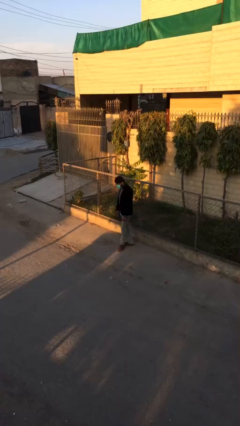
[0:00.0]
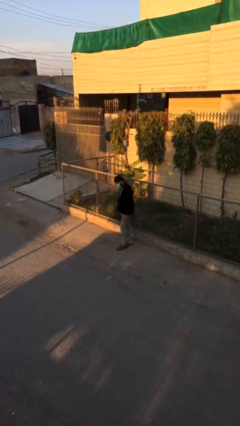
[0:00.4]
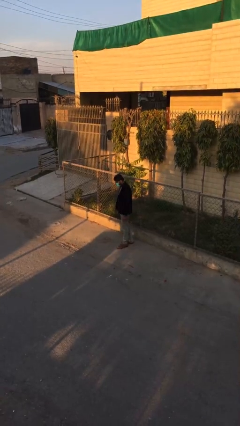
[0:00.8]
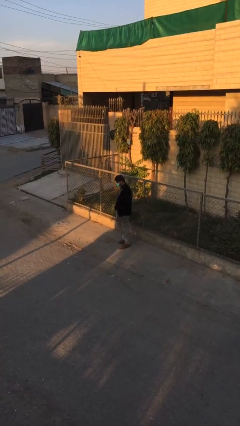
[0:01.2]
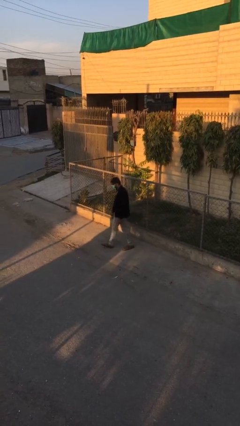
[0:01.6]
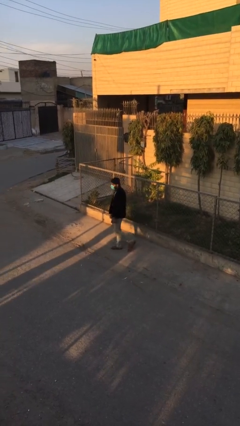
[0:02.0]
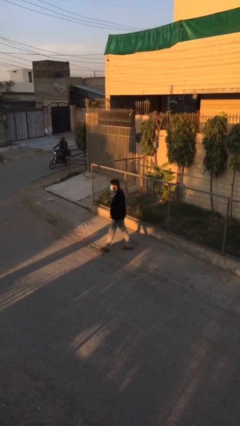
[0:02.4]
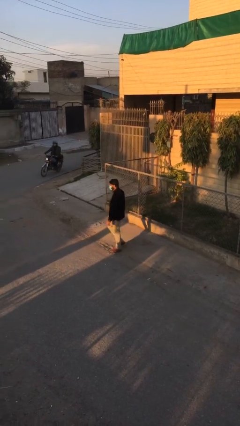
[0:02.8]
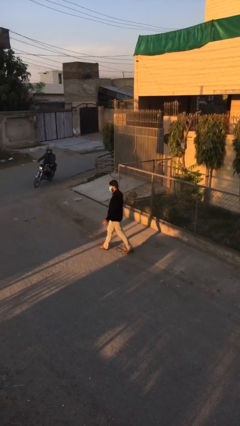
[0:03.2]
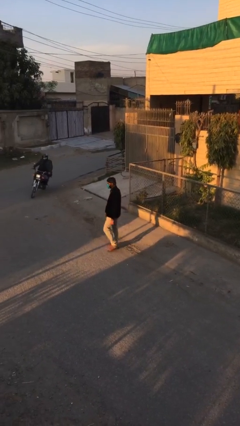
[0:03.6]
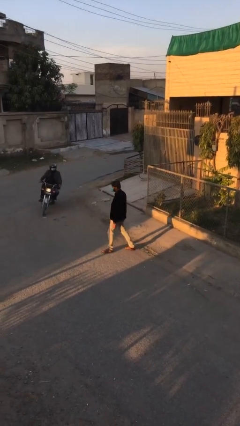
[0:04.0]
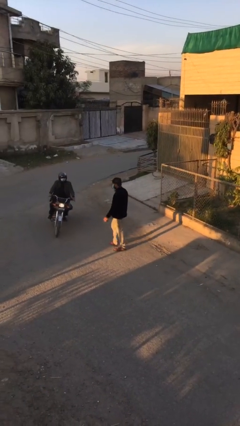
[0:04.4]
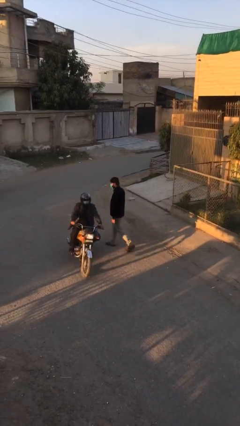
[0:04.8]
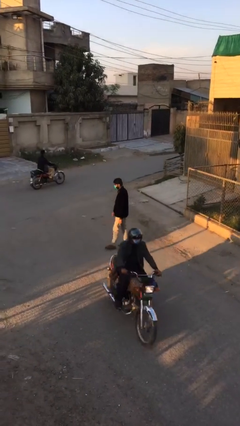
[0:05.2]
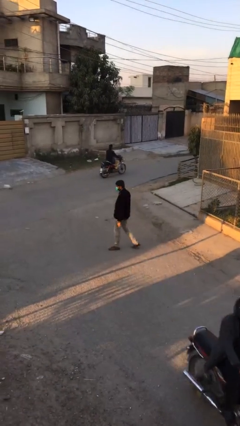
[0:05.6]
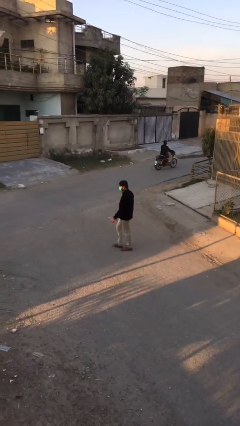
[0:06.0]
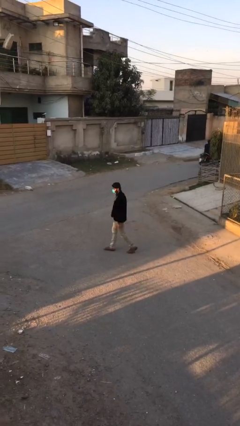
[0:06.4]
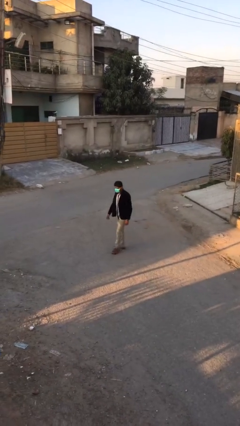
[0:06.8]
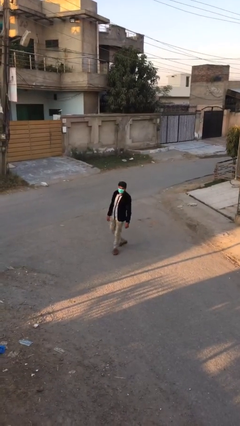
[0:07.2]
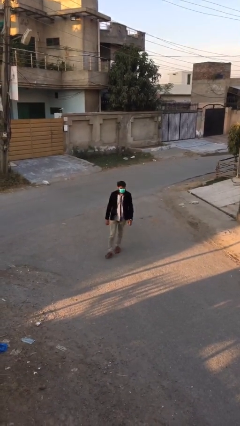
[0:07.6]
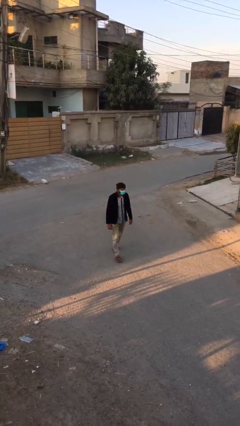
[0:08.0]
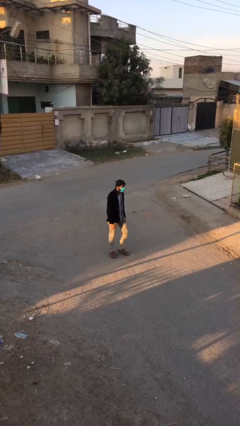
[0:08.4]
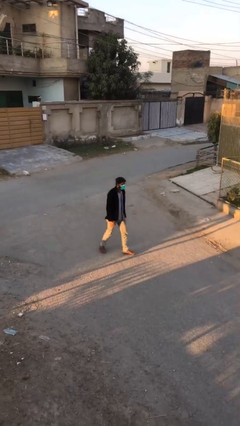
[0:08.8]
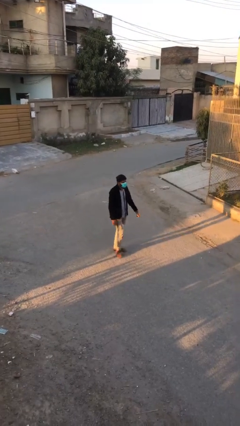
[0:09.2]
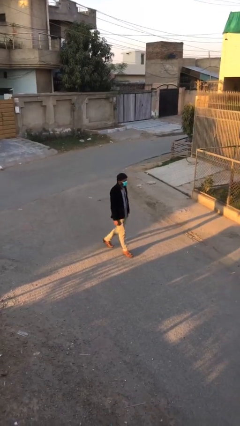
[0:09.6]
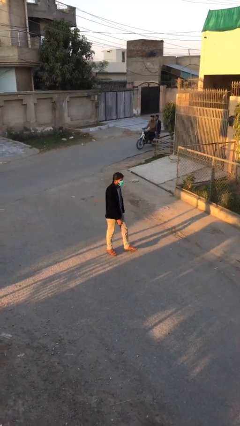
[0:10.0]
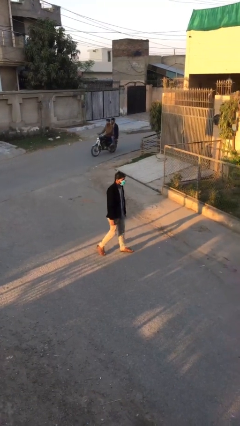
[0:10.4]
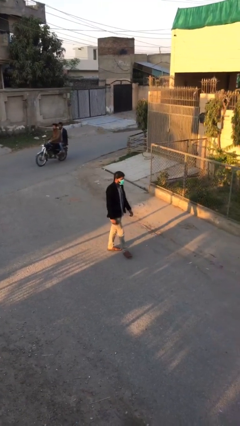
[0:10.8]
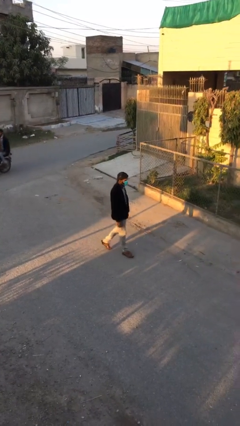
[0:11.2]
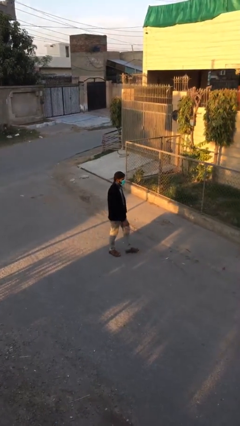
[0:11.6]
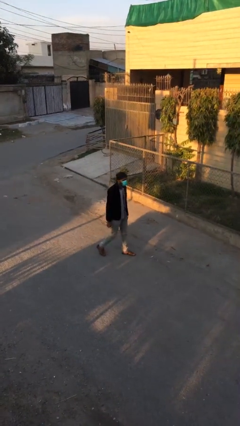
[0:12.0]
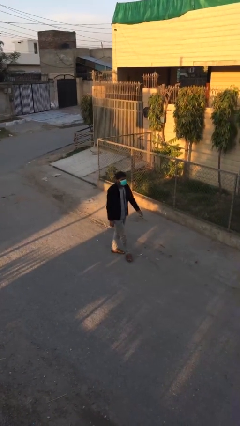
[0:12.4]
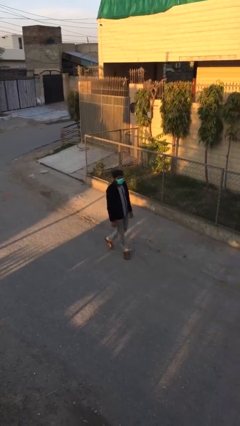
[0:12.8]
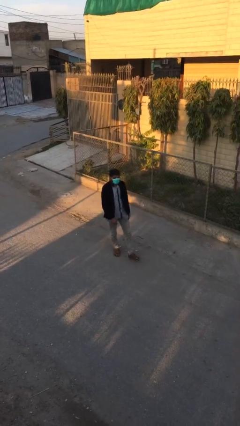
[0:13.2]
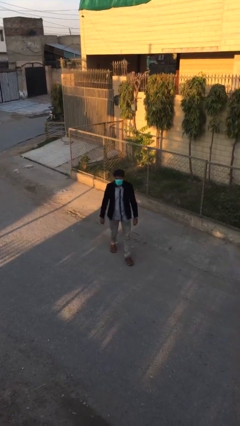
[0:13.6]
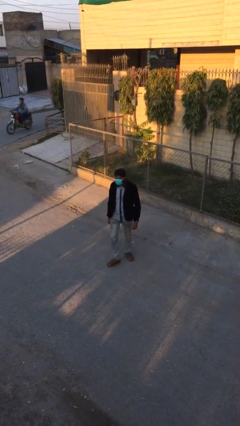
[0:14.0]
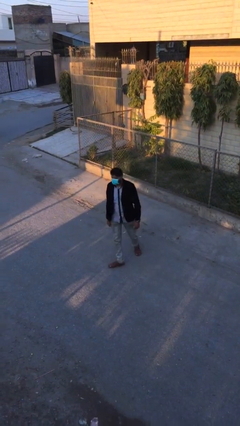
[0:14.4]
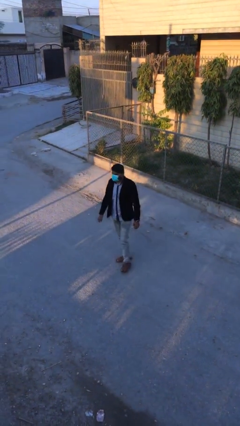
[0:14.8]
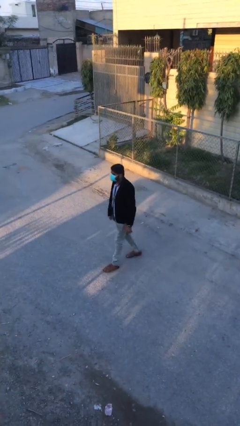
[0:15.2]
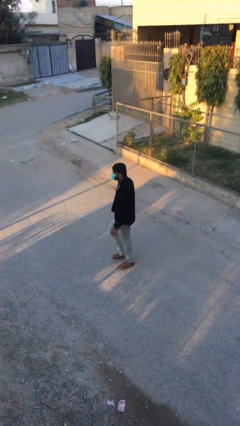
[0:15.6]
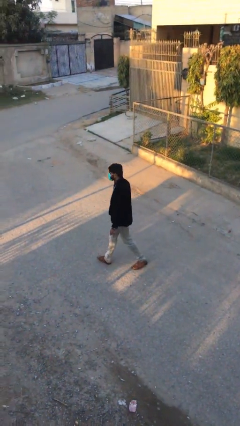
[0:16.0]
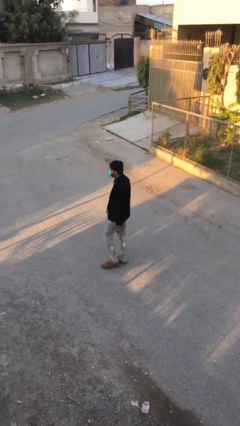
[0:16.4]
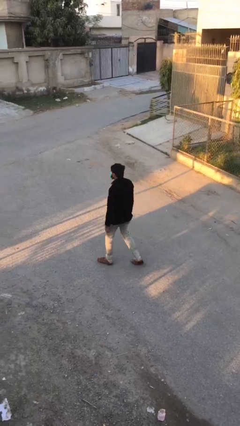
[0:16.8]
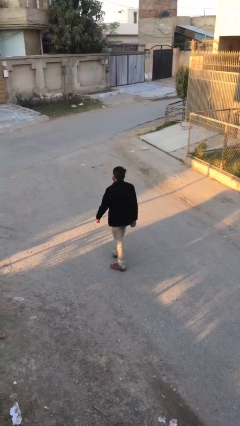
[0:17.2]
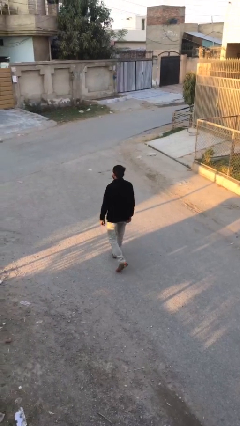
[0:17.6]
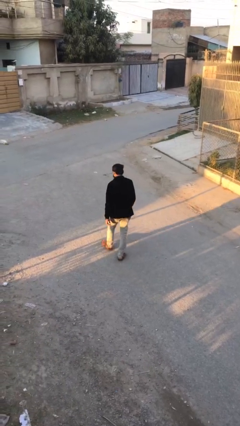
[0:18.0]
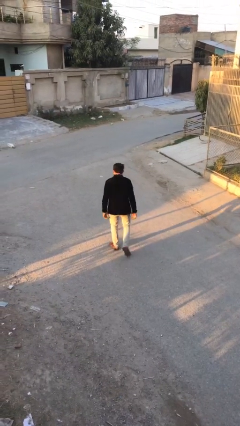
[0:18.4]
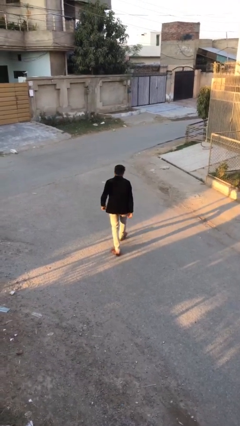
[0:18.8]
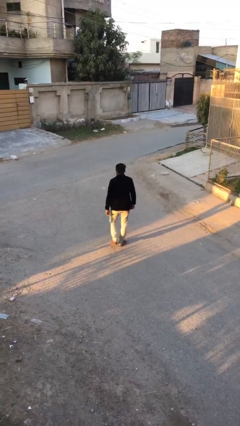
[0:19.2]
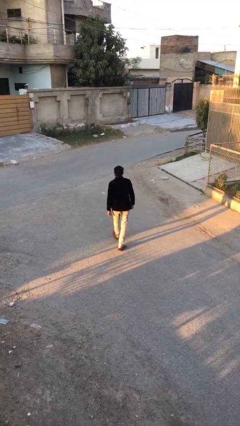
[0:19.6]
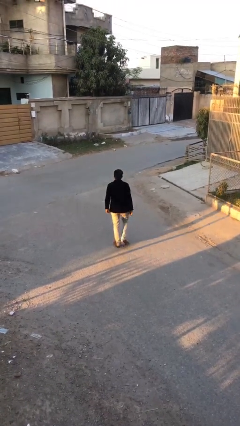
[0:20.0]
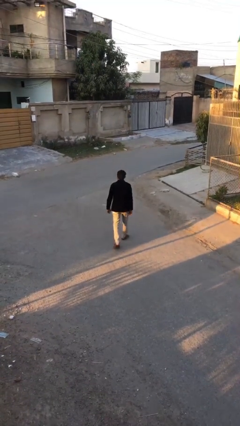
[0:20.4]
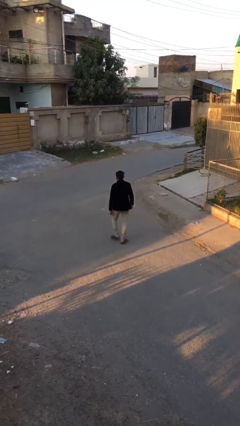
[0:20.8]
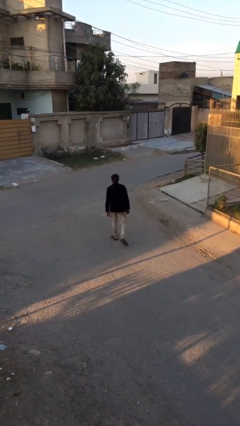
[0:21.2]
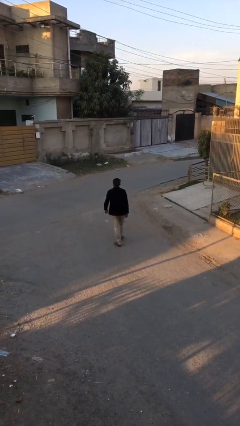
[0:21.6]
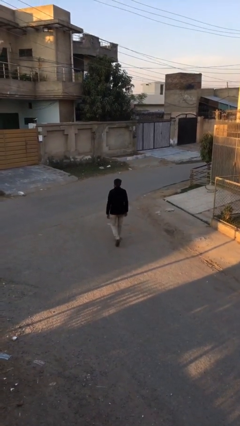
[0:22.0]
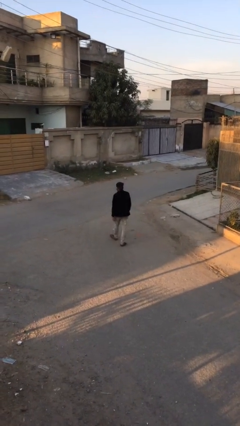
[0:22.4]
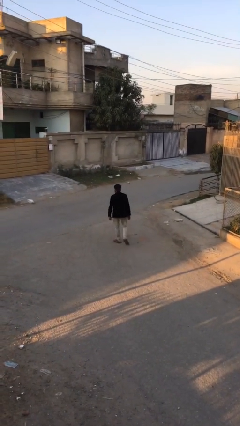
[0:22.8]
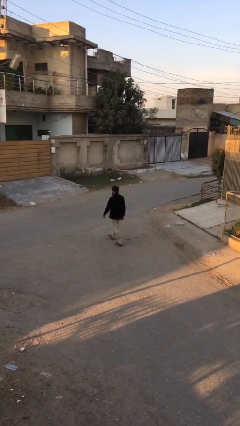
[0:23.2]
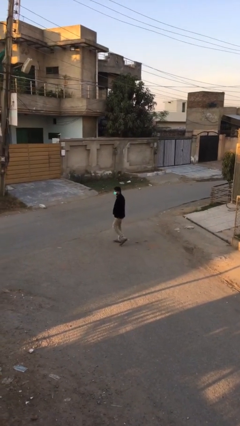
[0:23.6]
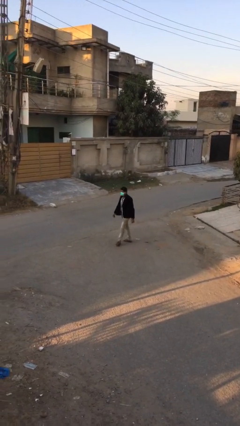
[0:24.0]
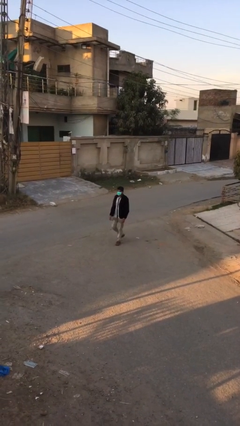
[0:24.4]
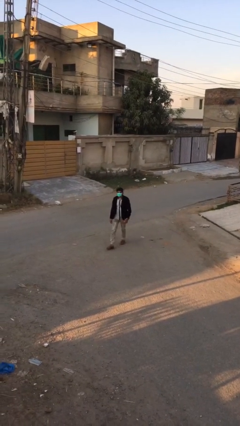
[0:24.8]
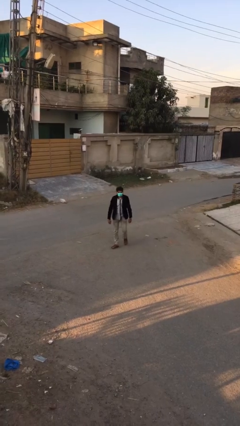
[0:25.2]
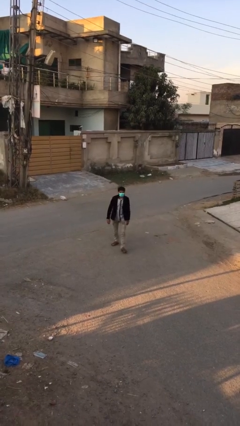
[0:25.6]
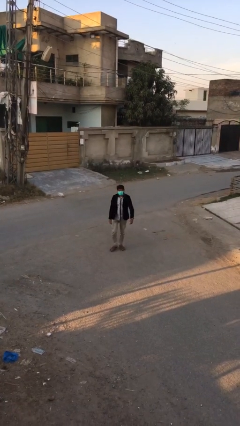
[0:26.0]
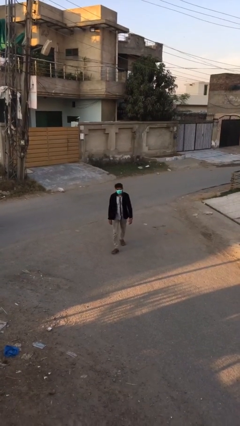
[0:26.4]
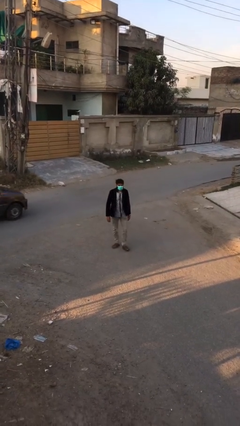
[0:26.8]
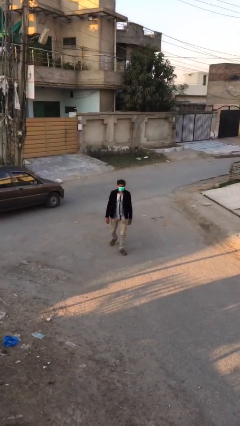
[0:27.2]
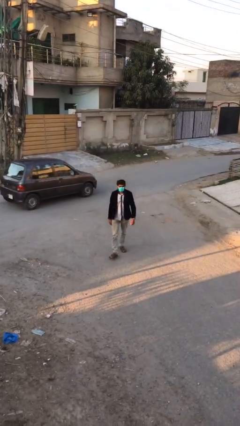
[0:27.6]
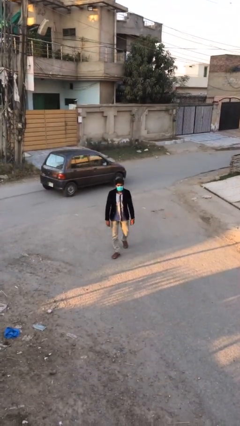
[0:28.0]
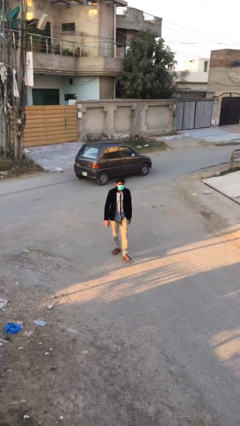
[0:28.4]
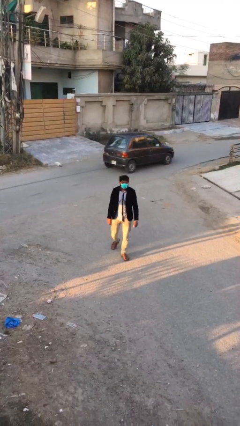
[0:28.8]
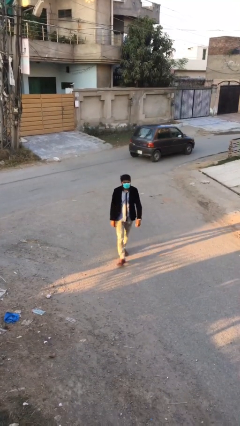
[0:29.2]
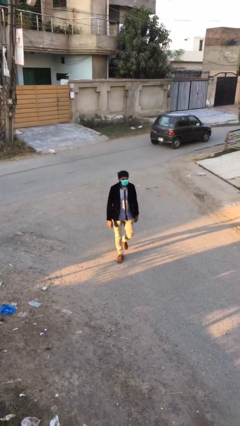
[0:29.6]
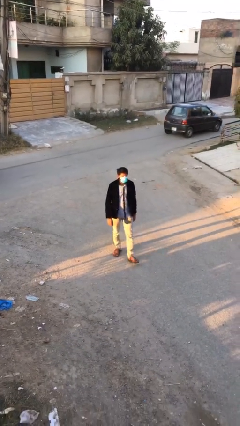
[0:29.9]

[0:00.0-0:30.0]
person walks

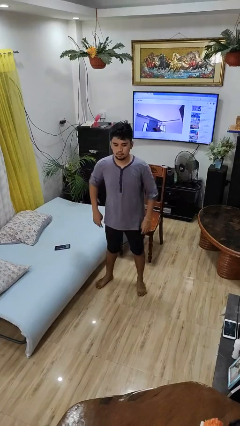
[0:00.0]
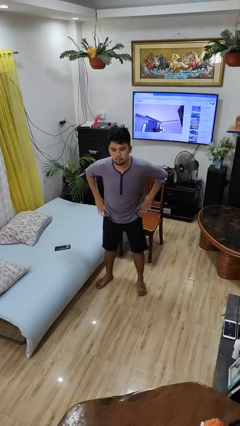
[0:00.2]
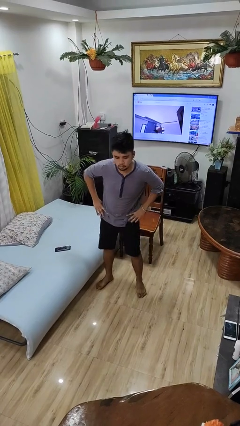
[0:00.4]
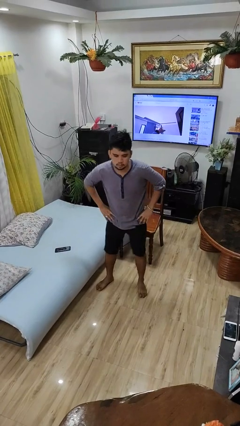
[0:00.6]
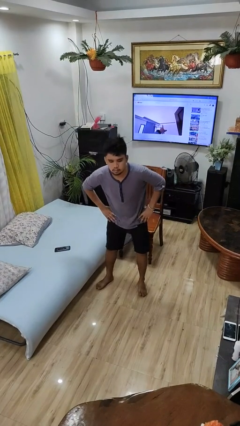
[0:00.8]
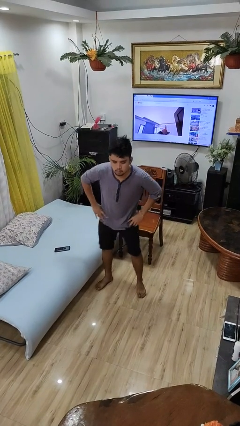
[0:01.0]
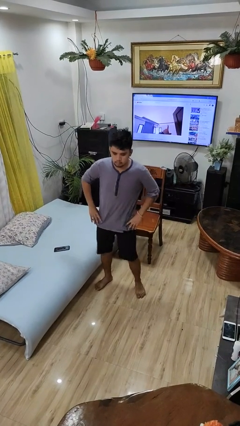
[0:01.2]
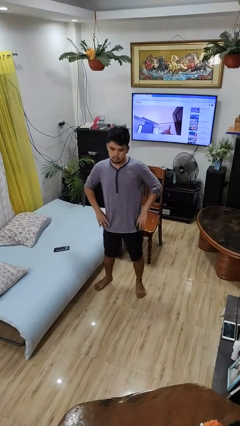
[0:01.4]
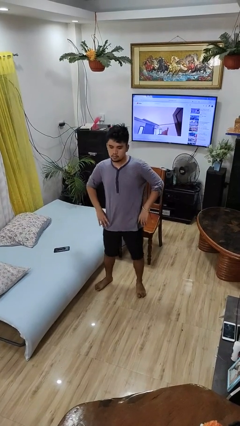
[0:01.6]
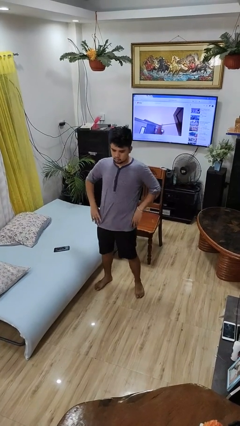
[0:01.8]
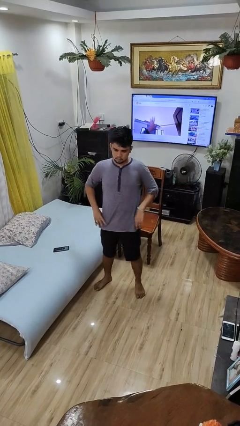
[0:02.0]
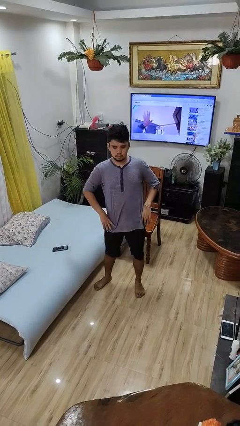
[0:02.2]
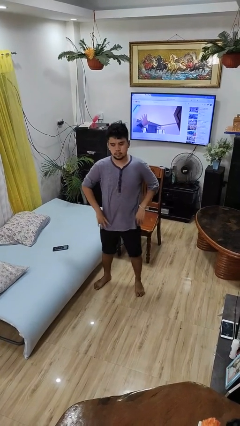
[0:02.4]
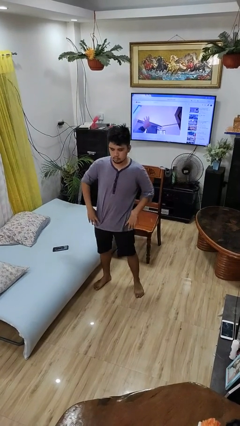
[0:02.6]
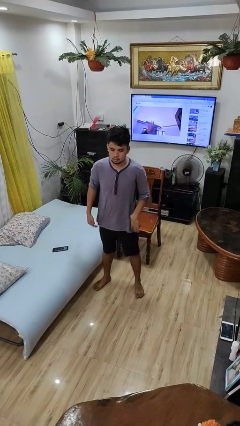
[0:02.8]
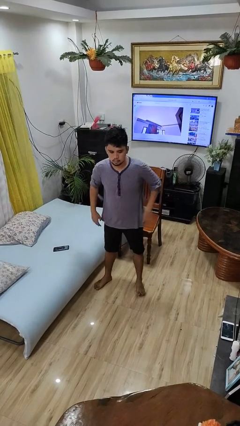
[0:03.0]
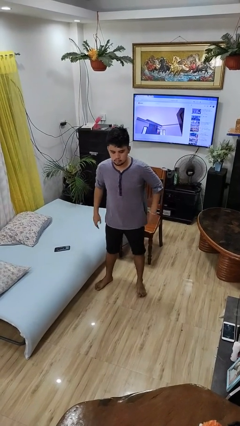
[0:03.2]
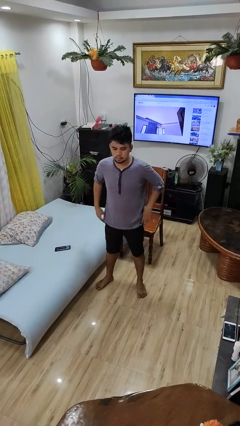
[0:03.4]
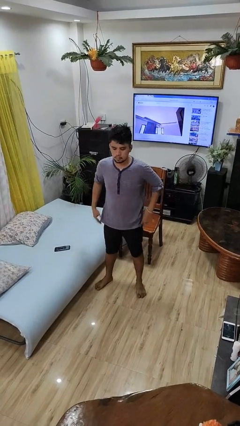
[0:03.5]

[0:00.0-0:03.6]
person wiggles hips
